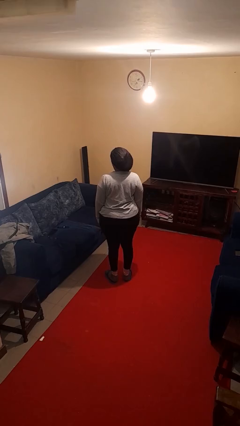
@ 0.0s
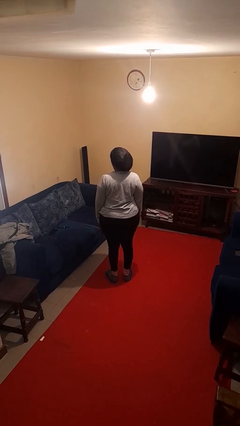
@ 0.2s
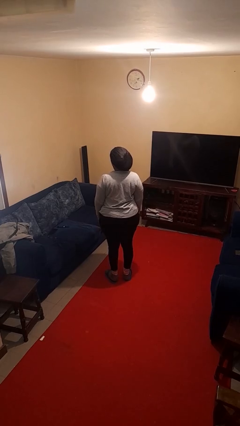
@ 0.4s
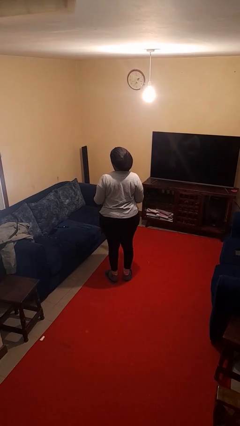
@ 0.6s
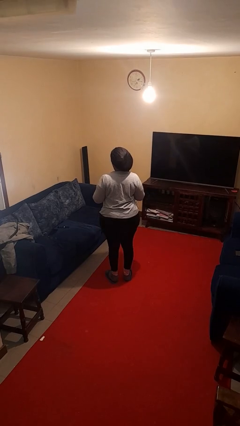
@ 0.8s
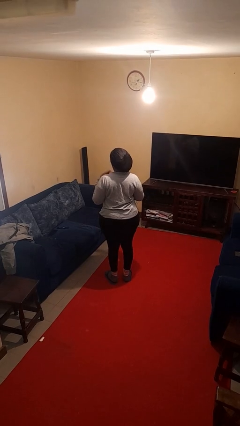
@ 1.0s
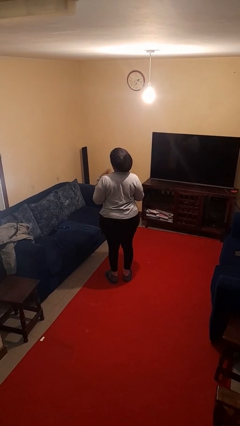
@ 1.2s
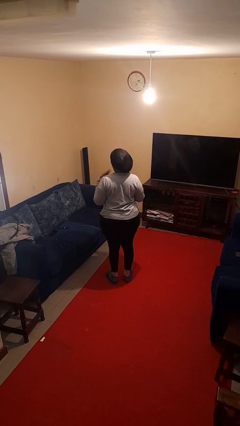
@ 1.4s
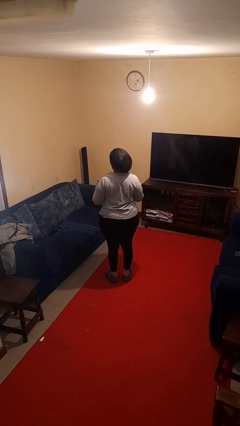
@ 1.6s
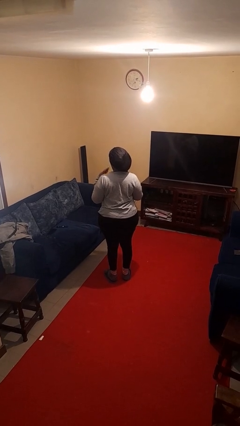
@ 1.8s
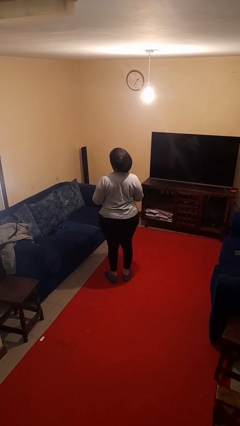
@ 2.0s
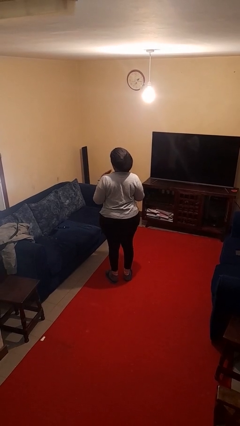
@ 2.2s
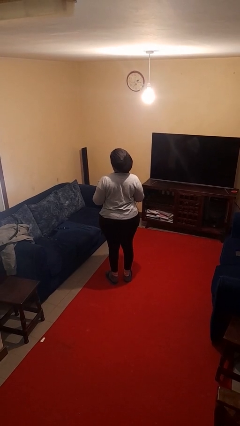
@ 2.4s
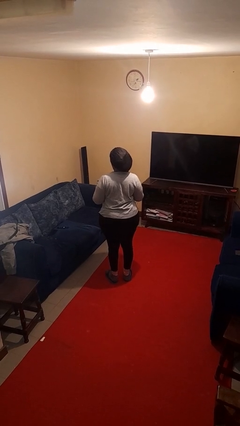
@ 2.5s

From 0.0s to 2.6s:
person drums on chest

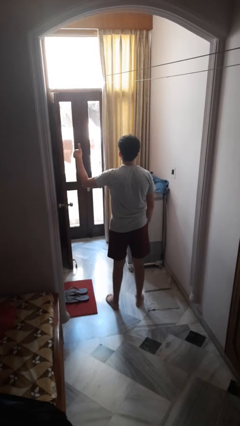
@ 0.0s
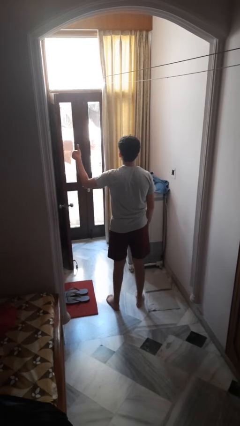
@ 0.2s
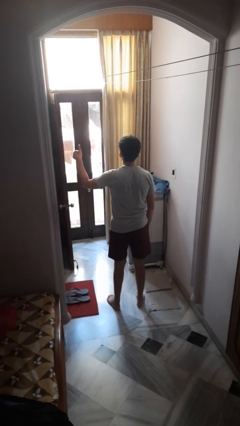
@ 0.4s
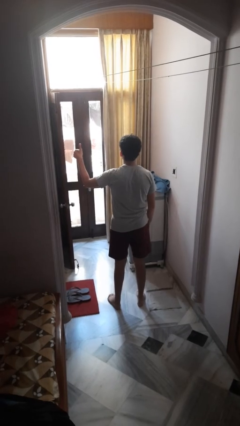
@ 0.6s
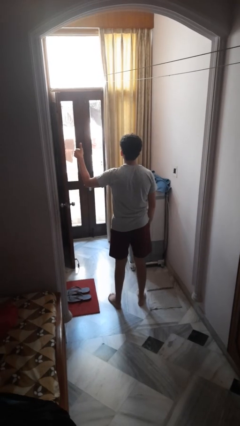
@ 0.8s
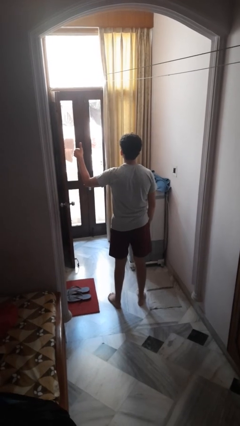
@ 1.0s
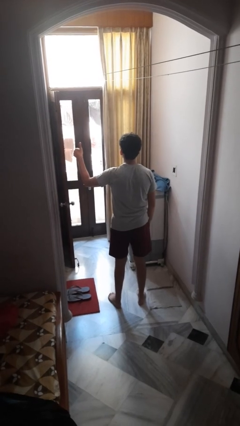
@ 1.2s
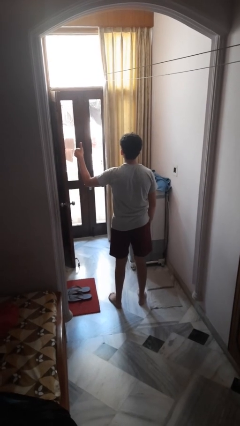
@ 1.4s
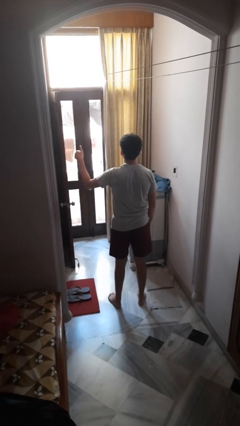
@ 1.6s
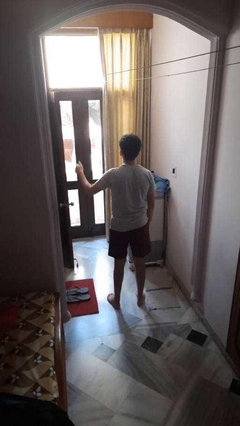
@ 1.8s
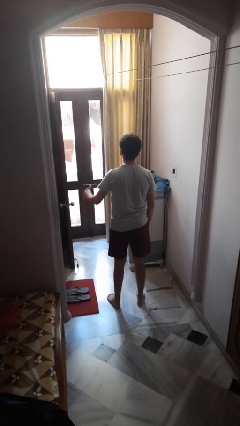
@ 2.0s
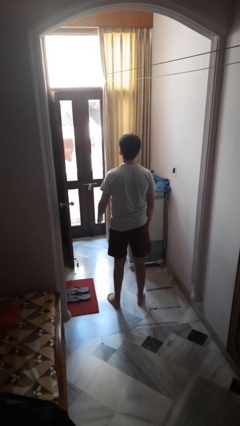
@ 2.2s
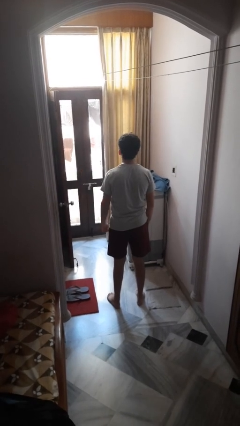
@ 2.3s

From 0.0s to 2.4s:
person gestures thumbs up

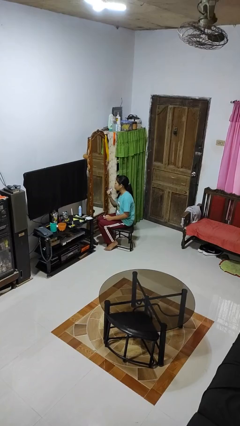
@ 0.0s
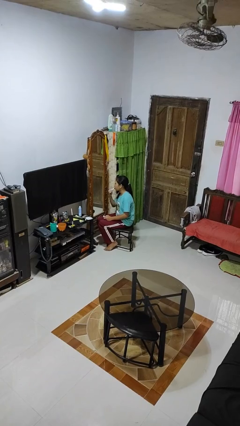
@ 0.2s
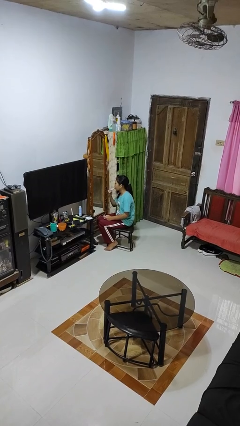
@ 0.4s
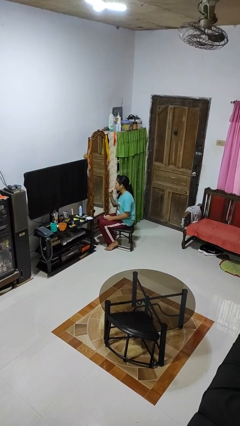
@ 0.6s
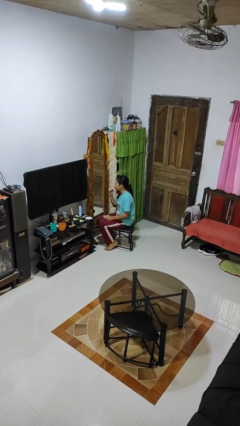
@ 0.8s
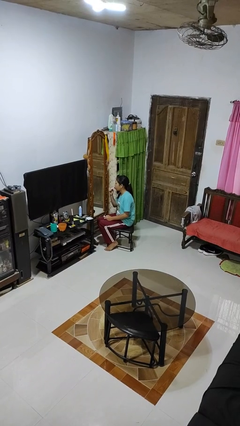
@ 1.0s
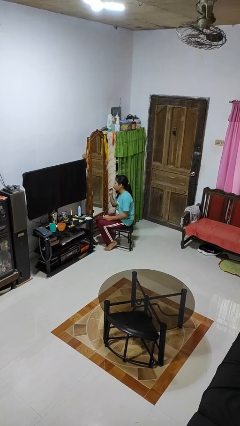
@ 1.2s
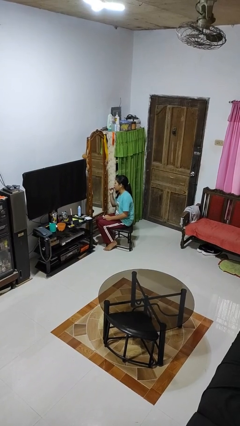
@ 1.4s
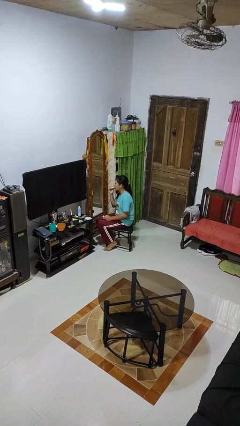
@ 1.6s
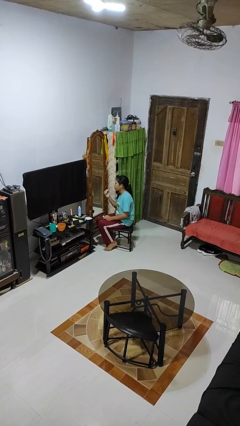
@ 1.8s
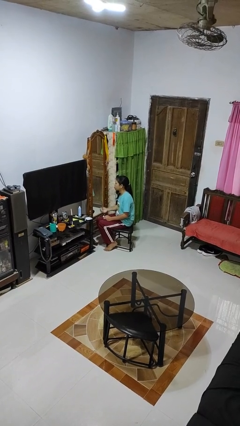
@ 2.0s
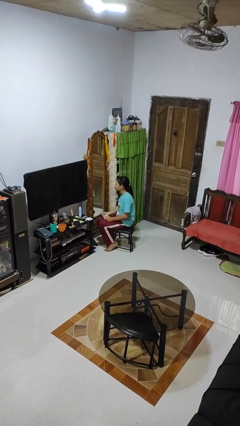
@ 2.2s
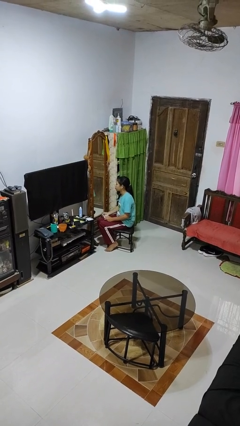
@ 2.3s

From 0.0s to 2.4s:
person applies lip makeup

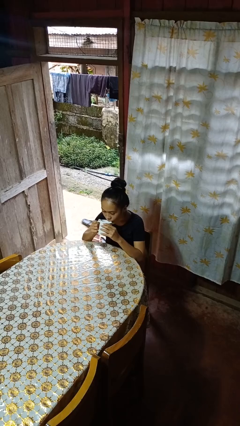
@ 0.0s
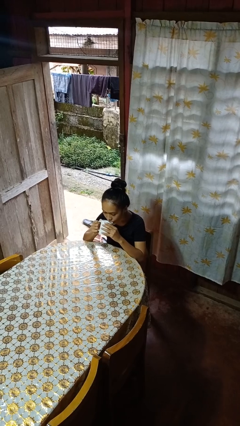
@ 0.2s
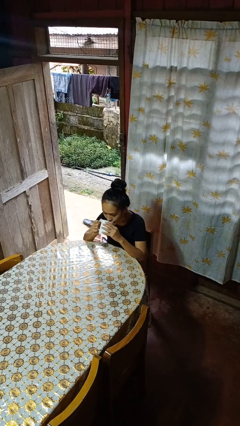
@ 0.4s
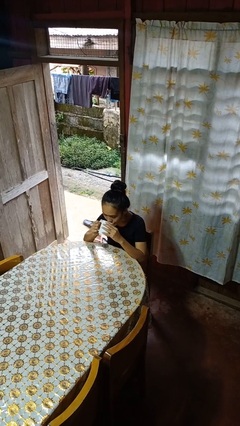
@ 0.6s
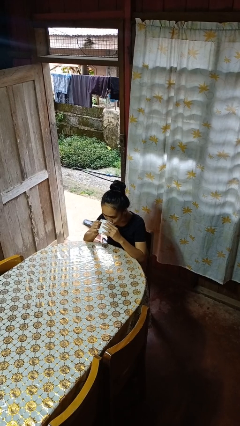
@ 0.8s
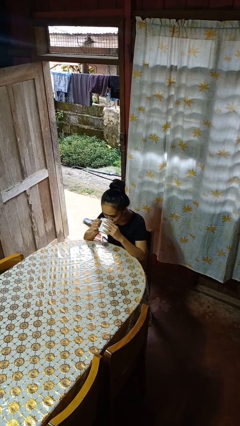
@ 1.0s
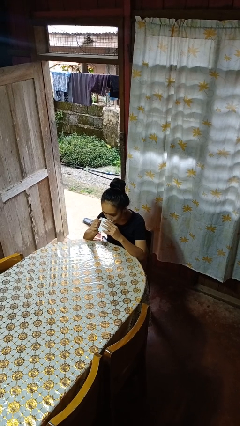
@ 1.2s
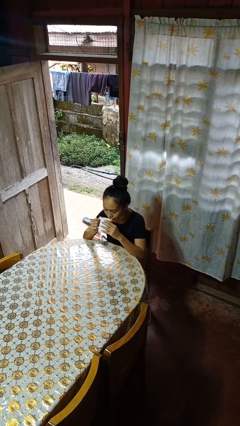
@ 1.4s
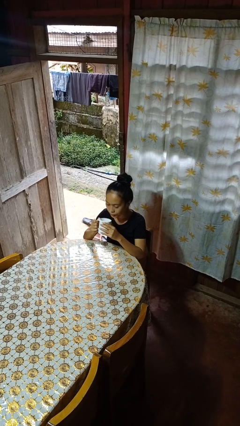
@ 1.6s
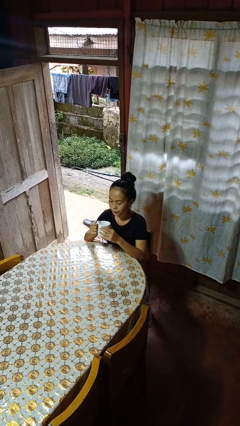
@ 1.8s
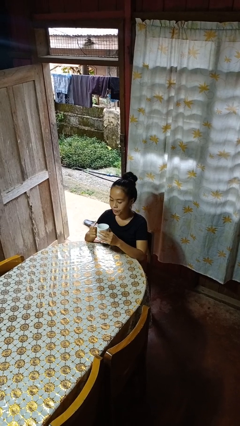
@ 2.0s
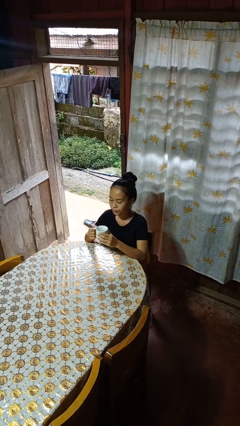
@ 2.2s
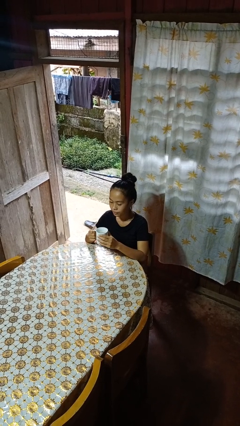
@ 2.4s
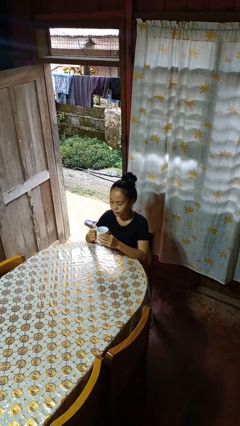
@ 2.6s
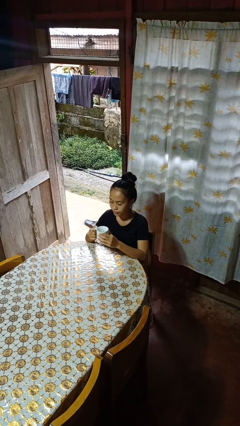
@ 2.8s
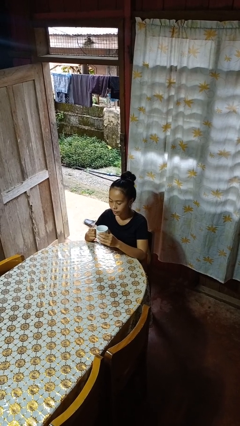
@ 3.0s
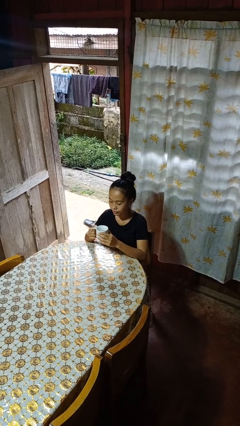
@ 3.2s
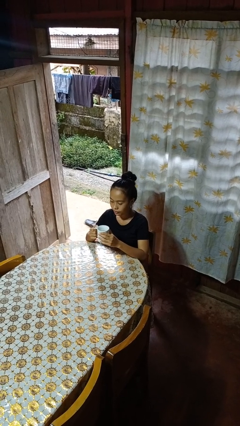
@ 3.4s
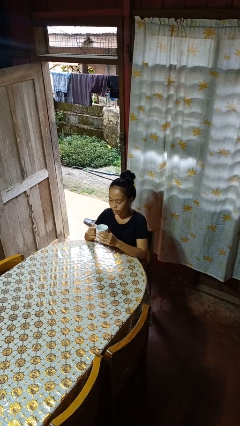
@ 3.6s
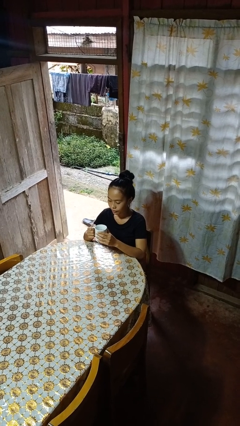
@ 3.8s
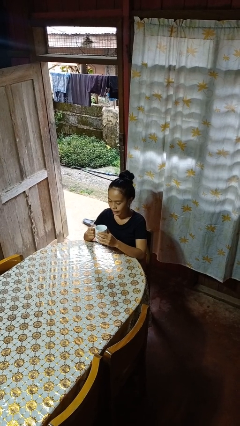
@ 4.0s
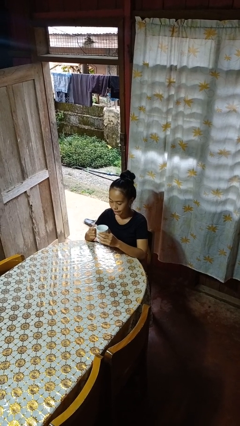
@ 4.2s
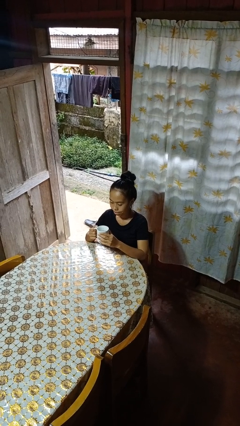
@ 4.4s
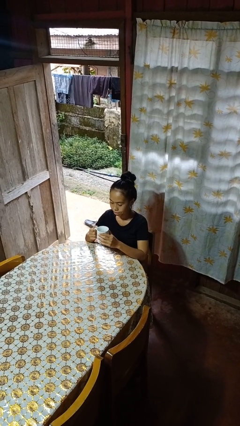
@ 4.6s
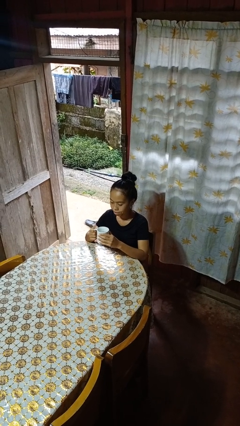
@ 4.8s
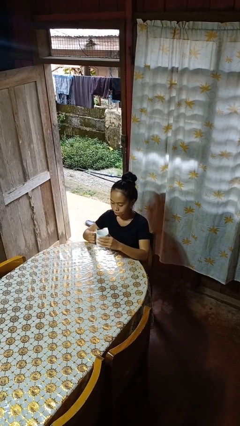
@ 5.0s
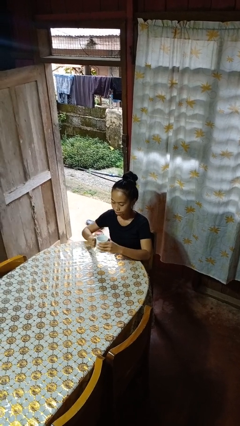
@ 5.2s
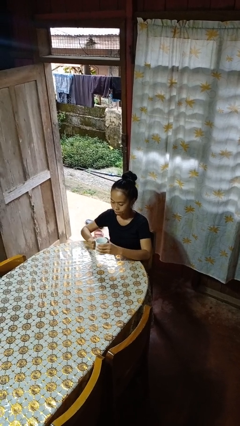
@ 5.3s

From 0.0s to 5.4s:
person drinks from mug

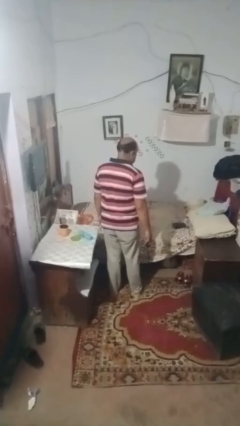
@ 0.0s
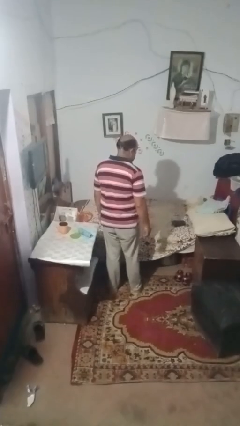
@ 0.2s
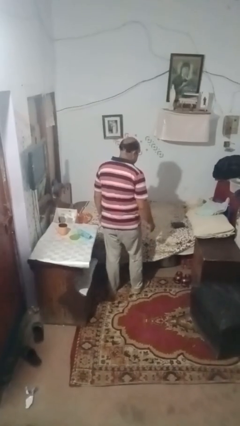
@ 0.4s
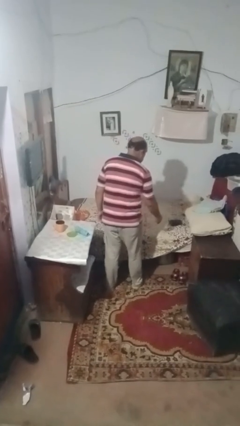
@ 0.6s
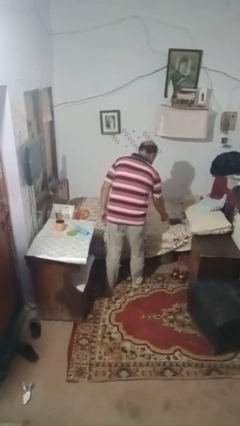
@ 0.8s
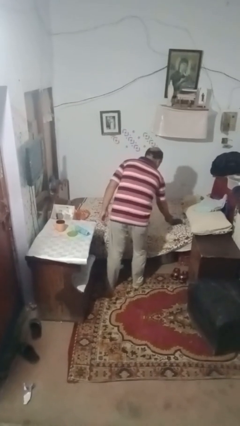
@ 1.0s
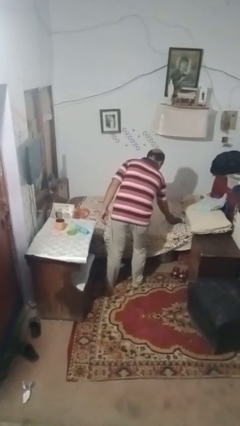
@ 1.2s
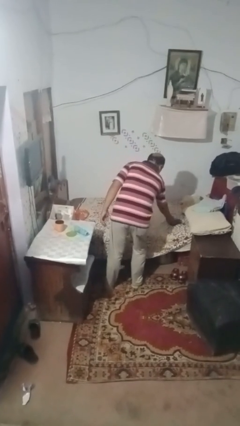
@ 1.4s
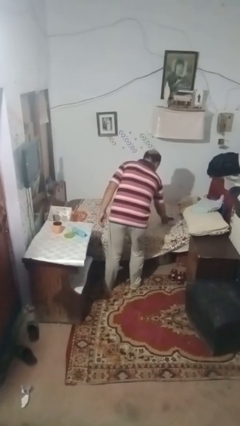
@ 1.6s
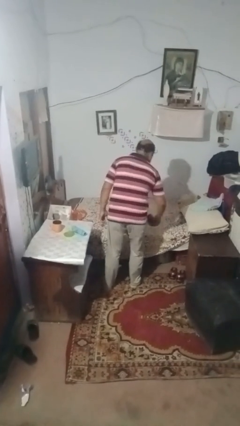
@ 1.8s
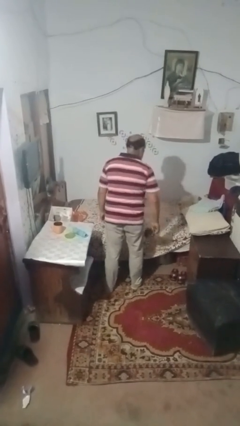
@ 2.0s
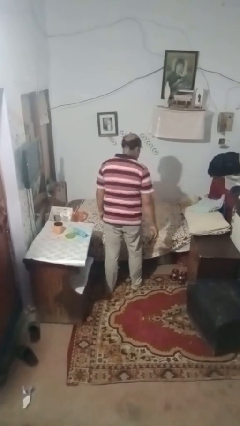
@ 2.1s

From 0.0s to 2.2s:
person picks up object from bed

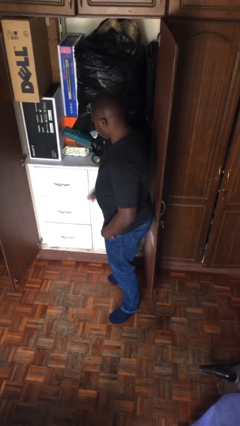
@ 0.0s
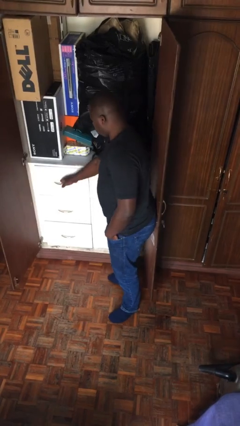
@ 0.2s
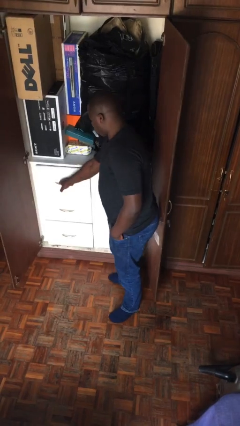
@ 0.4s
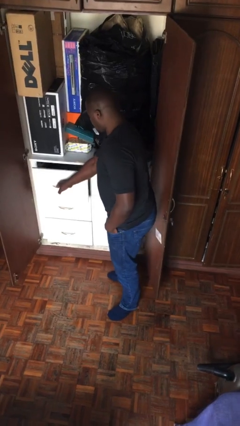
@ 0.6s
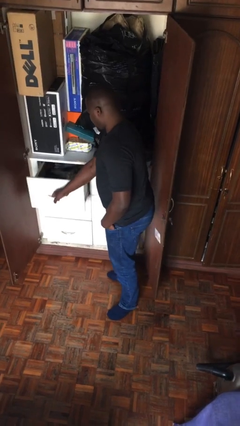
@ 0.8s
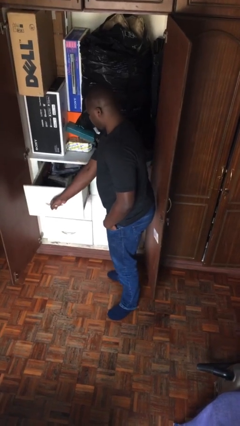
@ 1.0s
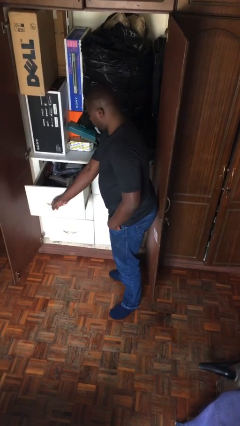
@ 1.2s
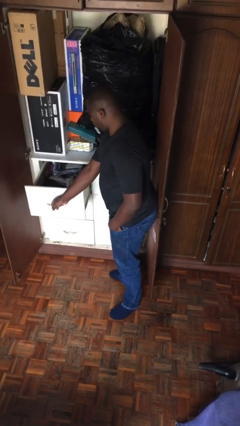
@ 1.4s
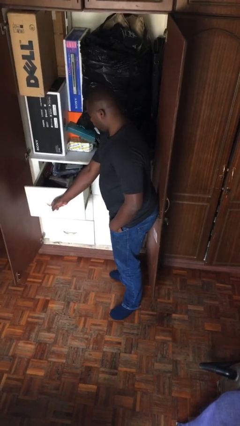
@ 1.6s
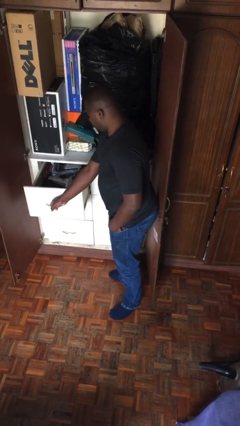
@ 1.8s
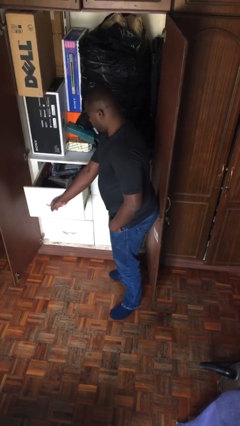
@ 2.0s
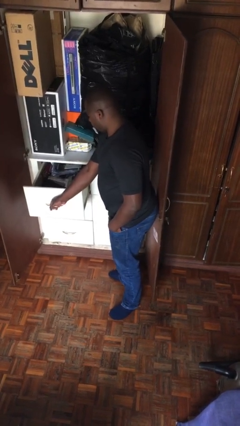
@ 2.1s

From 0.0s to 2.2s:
person opens dresser drawer

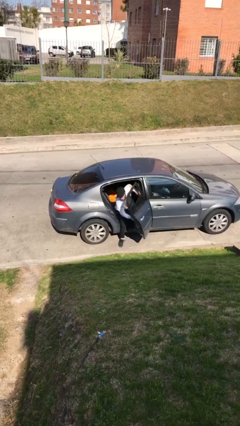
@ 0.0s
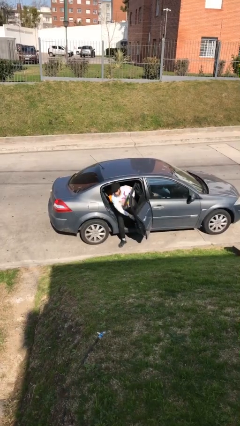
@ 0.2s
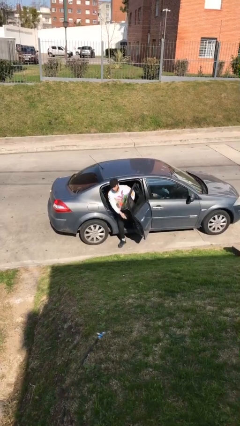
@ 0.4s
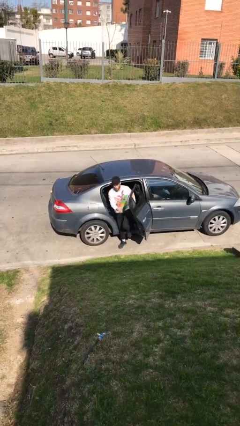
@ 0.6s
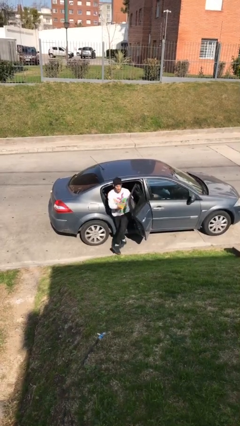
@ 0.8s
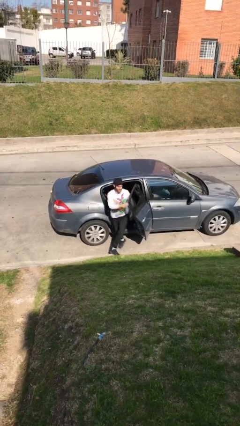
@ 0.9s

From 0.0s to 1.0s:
person exits car
